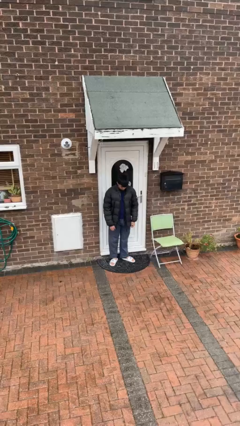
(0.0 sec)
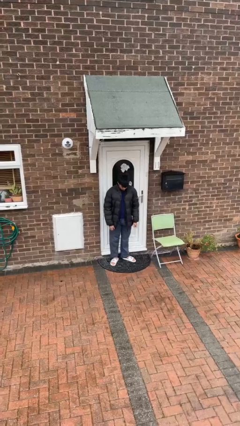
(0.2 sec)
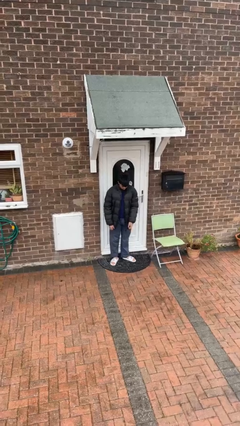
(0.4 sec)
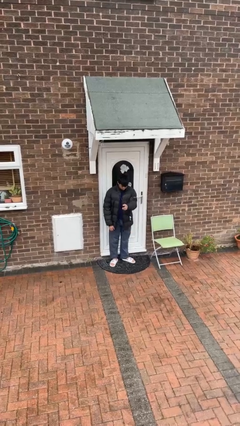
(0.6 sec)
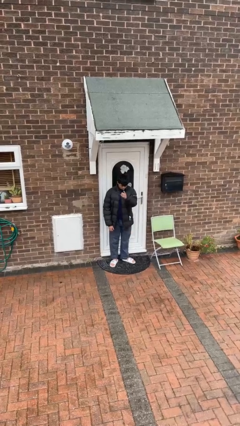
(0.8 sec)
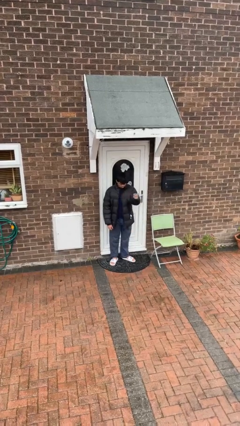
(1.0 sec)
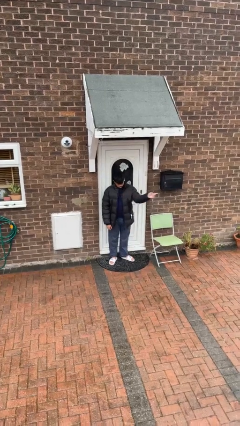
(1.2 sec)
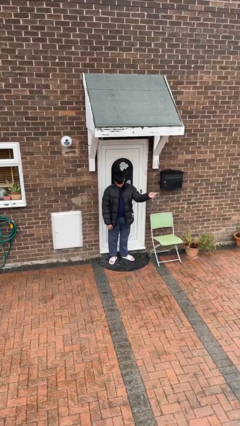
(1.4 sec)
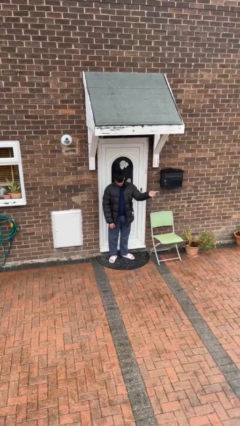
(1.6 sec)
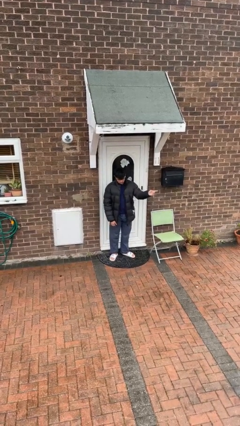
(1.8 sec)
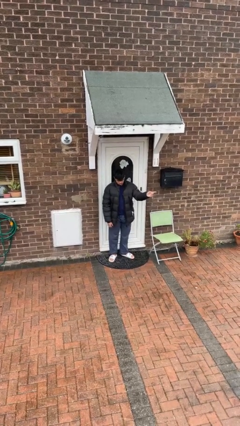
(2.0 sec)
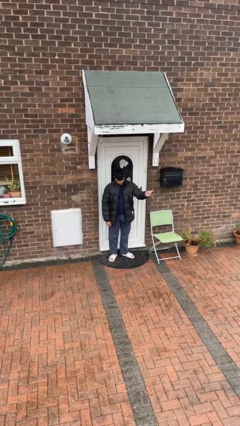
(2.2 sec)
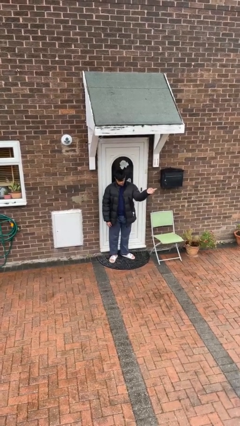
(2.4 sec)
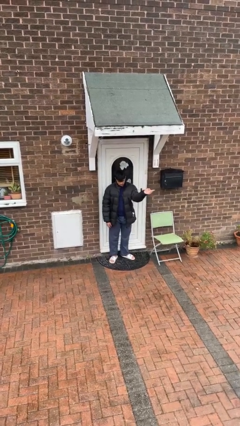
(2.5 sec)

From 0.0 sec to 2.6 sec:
person gestures swipe left

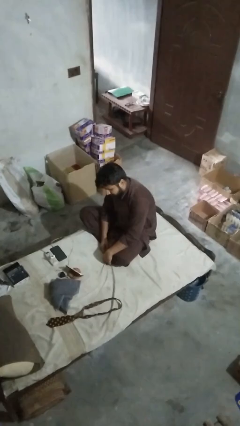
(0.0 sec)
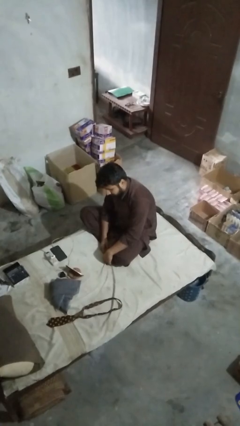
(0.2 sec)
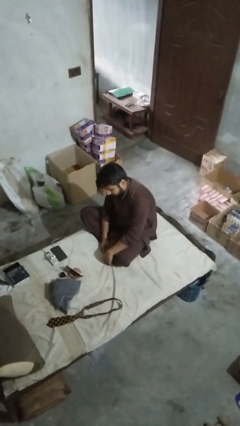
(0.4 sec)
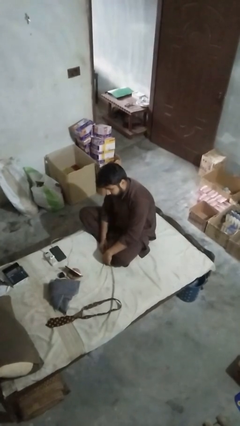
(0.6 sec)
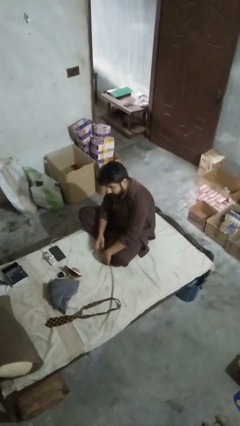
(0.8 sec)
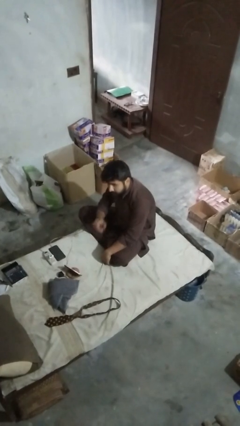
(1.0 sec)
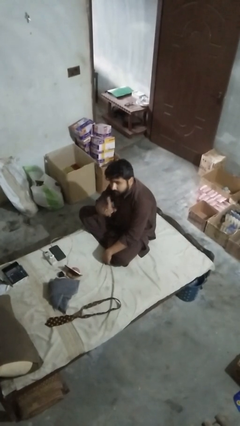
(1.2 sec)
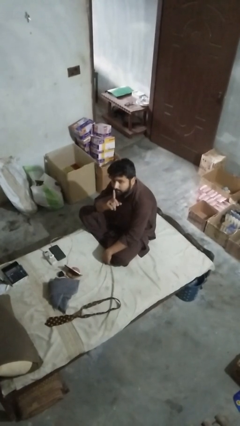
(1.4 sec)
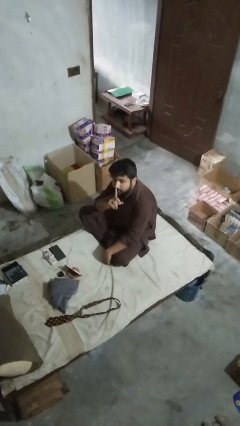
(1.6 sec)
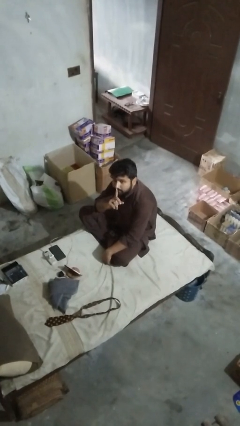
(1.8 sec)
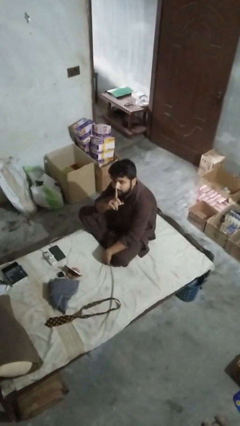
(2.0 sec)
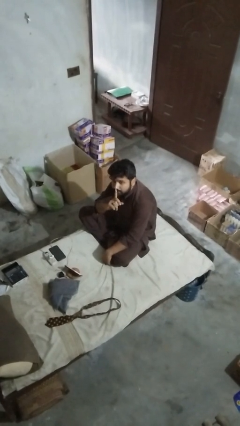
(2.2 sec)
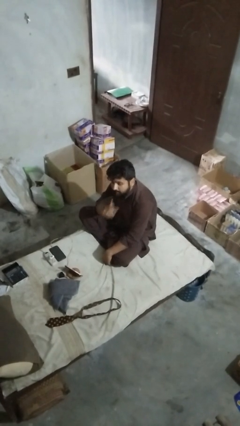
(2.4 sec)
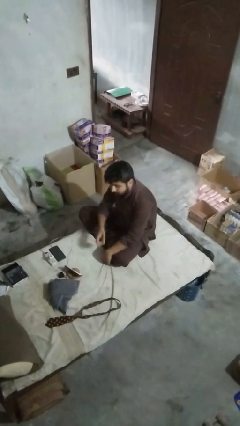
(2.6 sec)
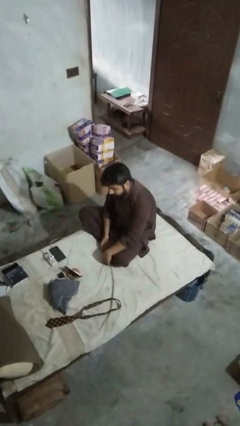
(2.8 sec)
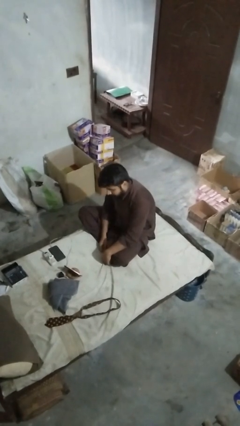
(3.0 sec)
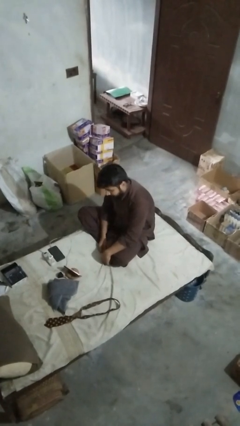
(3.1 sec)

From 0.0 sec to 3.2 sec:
person gestures be quiet

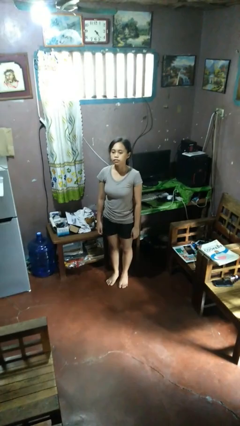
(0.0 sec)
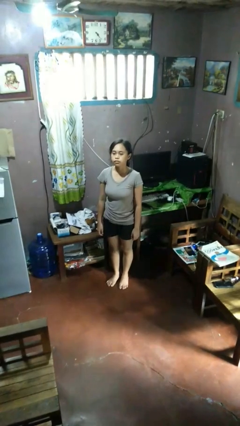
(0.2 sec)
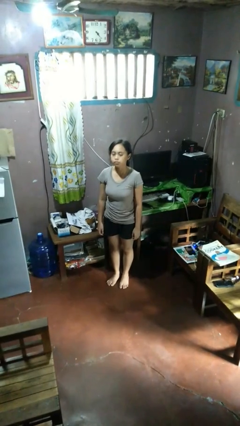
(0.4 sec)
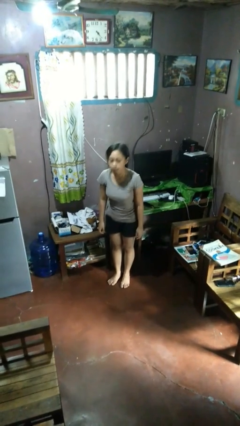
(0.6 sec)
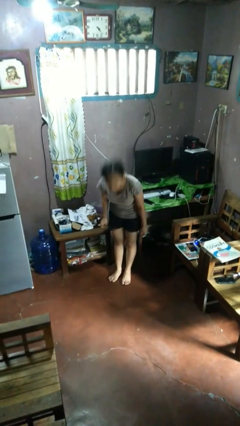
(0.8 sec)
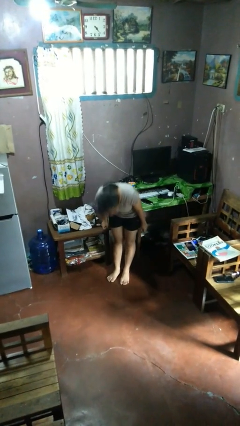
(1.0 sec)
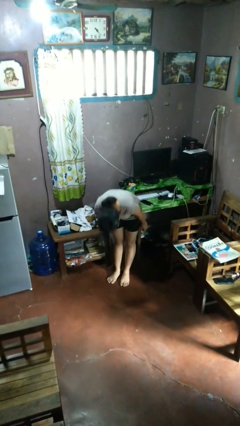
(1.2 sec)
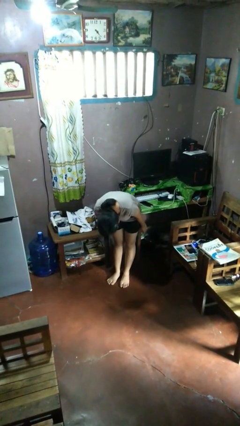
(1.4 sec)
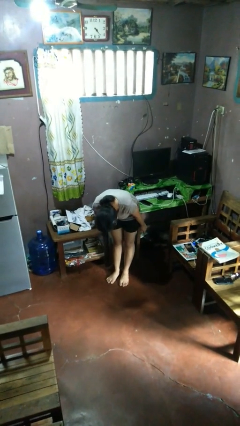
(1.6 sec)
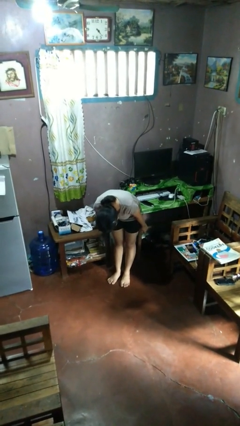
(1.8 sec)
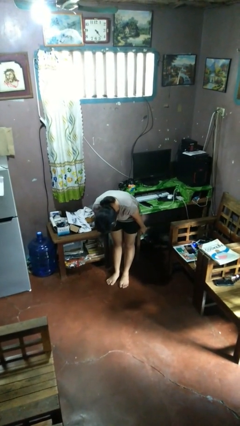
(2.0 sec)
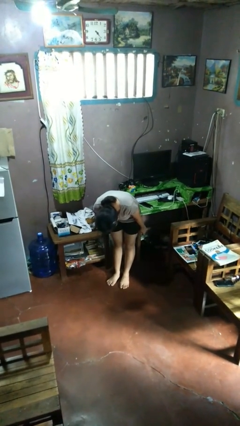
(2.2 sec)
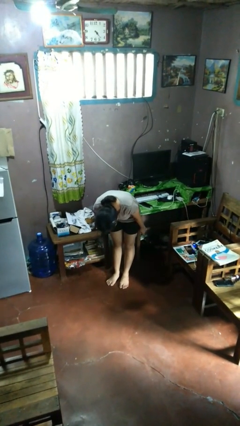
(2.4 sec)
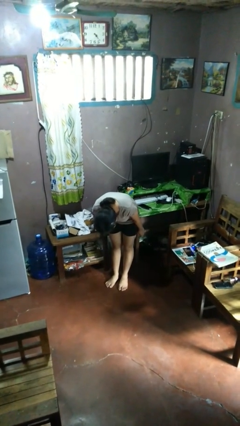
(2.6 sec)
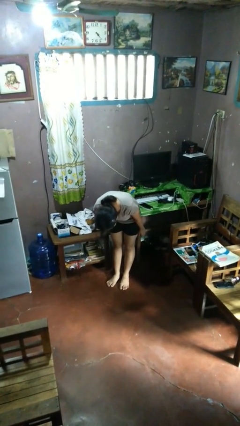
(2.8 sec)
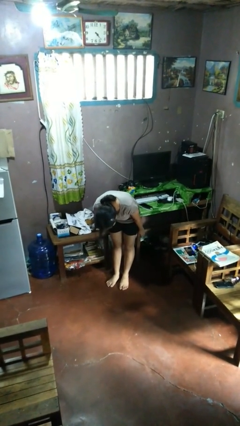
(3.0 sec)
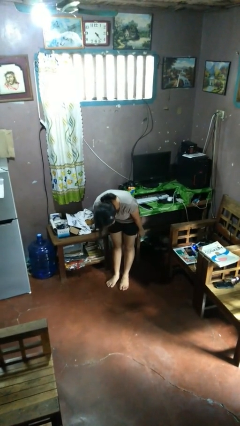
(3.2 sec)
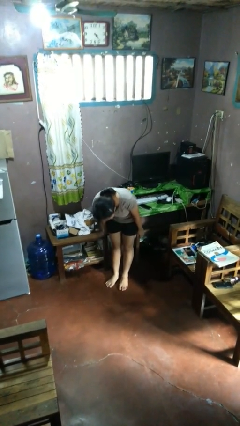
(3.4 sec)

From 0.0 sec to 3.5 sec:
person bows

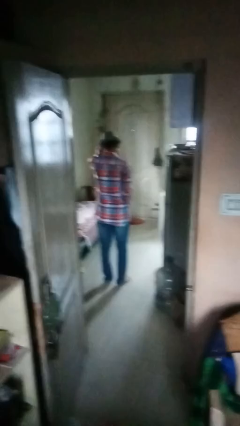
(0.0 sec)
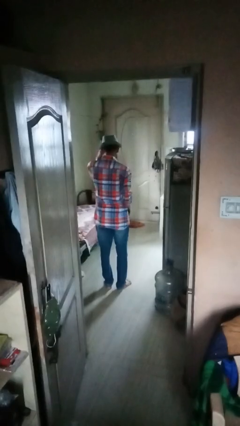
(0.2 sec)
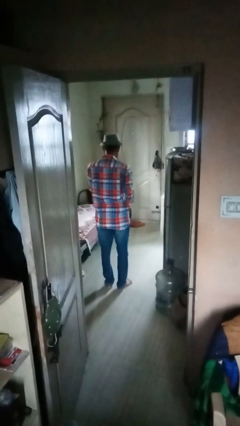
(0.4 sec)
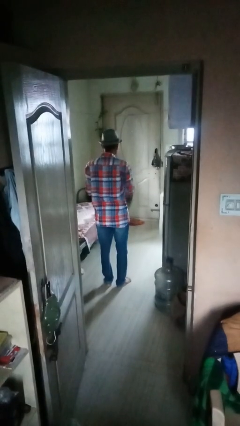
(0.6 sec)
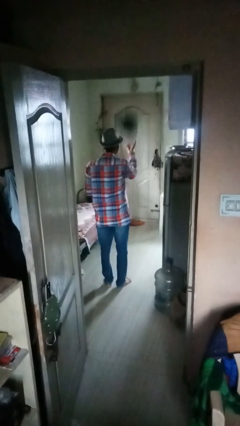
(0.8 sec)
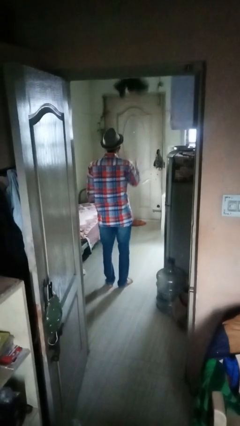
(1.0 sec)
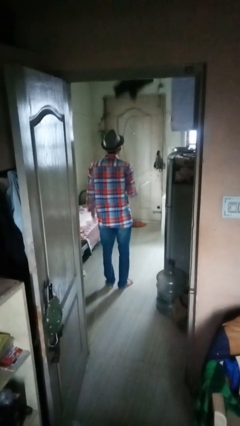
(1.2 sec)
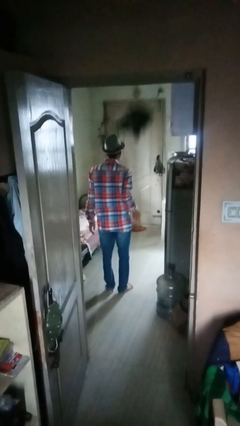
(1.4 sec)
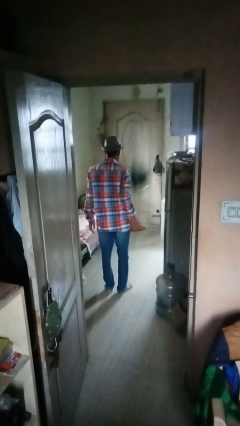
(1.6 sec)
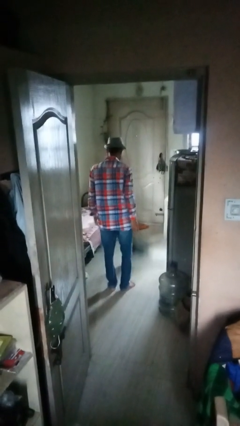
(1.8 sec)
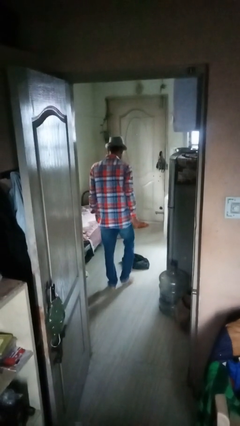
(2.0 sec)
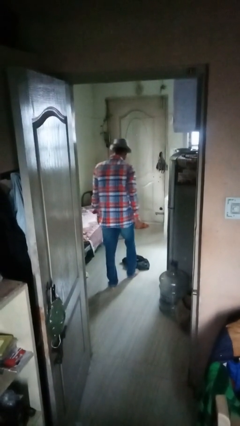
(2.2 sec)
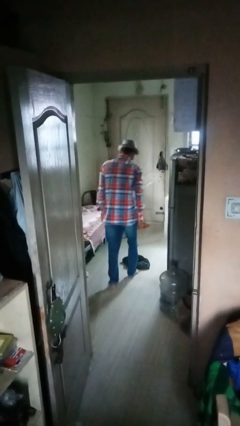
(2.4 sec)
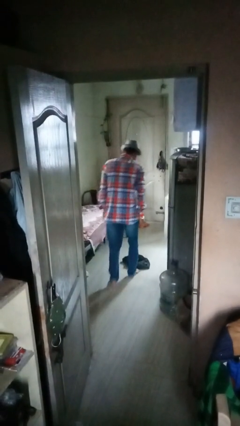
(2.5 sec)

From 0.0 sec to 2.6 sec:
person throws object into air

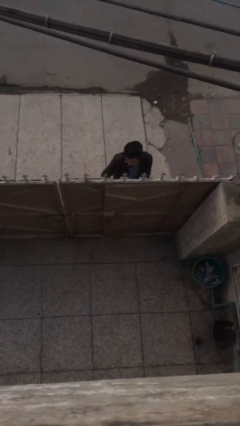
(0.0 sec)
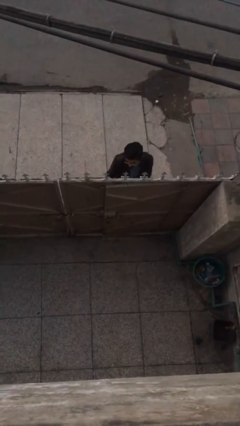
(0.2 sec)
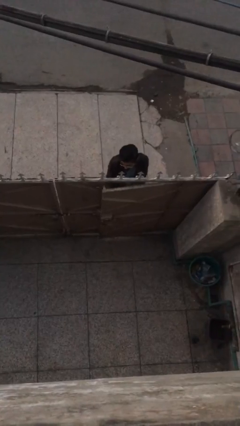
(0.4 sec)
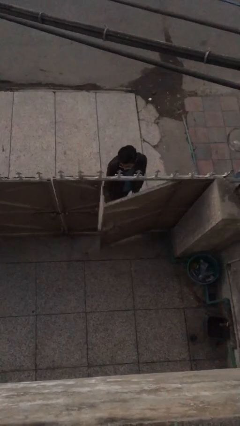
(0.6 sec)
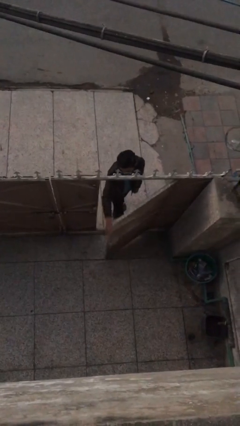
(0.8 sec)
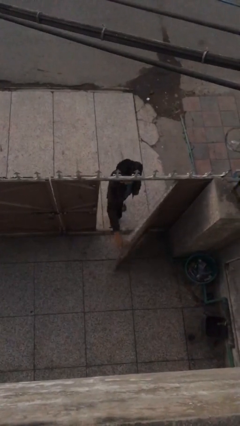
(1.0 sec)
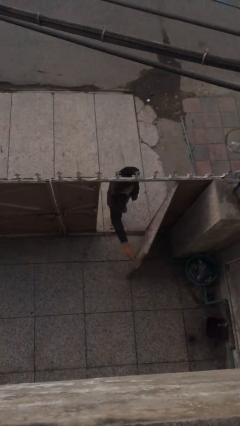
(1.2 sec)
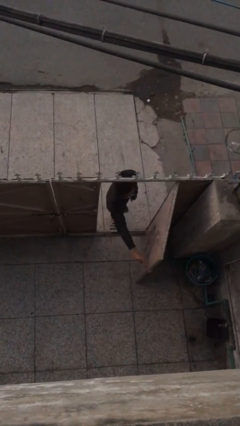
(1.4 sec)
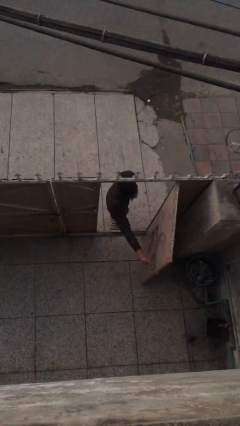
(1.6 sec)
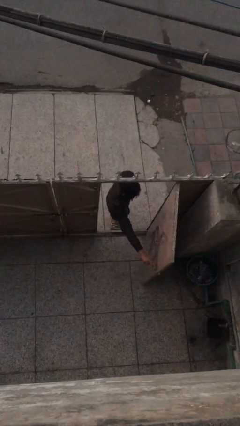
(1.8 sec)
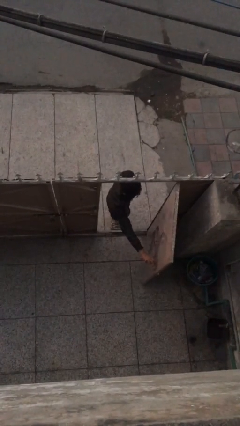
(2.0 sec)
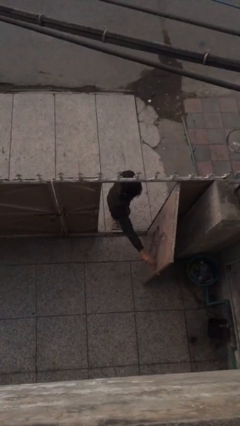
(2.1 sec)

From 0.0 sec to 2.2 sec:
person opens facility door

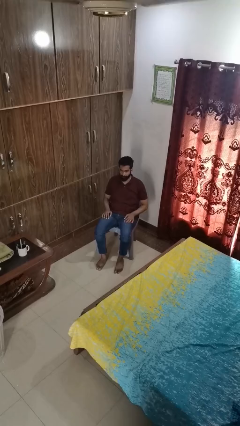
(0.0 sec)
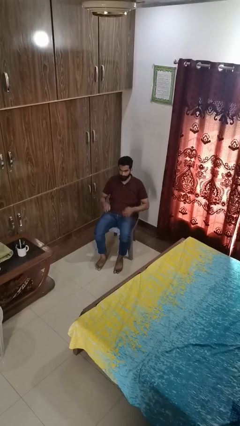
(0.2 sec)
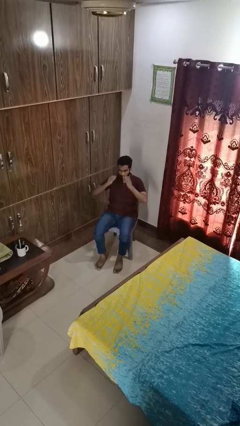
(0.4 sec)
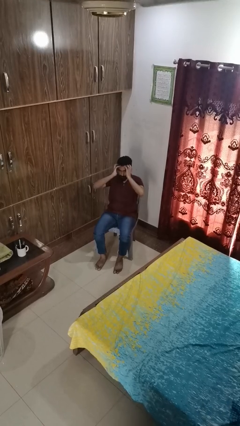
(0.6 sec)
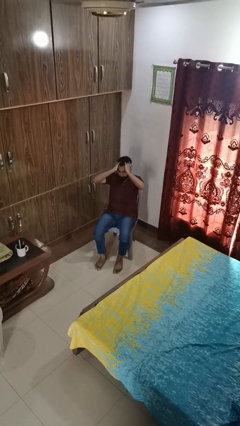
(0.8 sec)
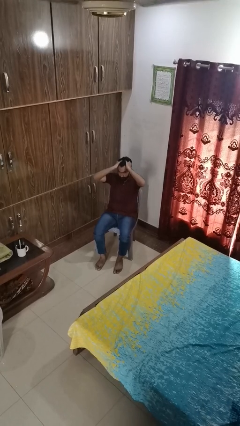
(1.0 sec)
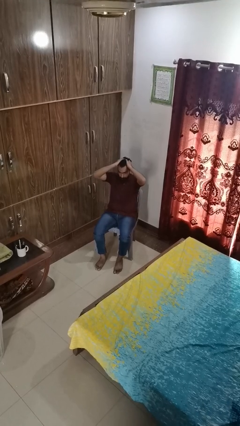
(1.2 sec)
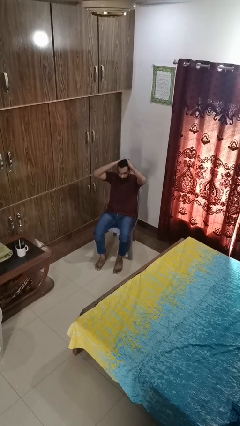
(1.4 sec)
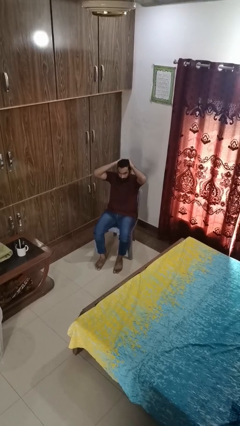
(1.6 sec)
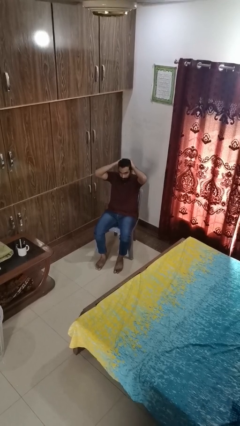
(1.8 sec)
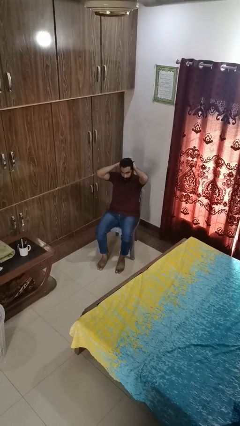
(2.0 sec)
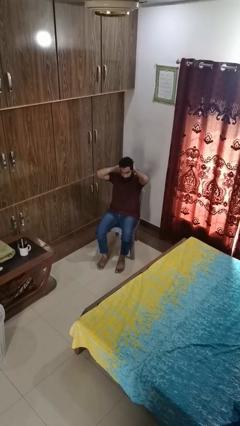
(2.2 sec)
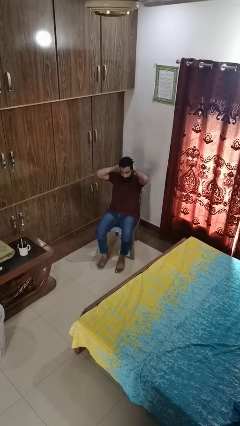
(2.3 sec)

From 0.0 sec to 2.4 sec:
person strokes hair

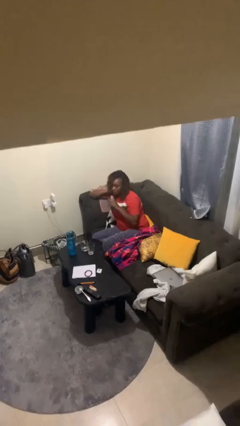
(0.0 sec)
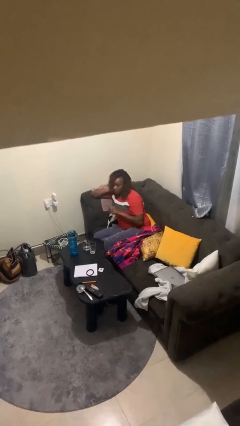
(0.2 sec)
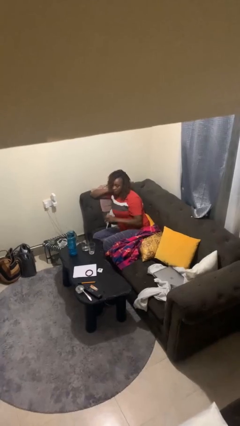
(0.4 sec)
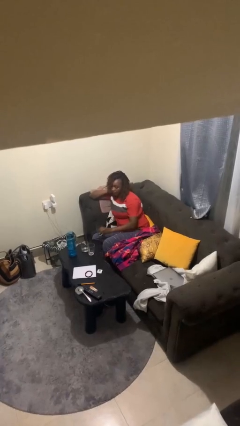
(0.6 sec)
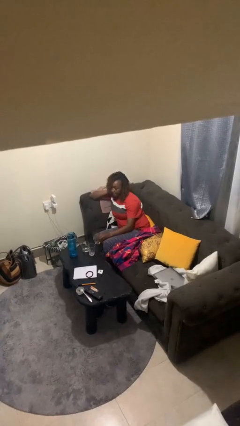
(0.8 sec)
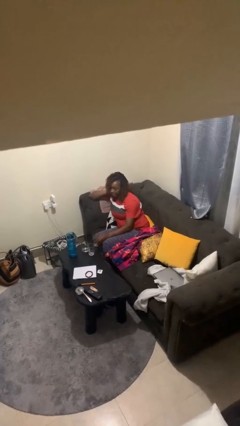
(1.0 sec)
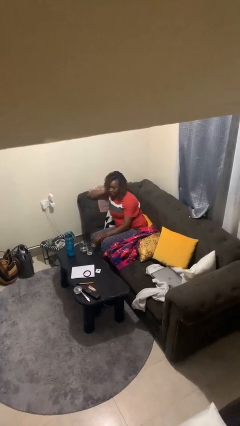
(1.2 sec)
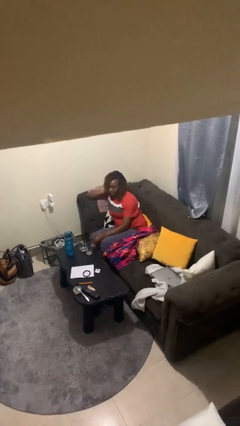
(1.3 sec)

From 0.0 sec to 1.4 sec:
person puts down object on table
